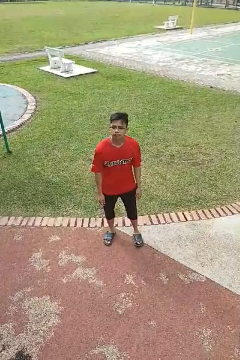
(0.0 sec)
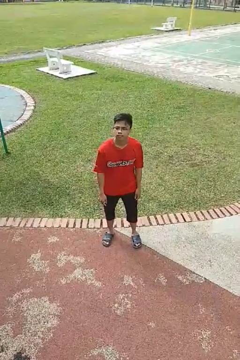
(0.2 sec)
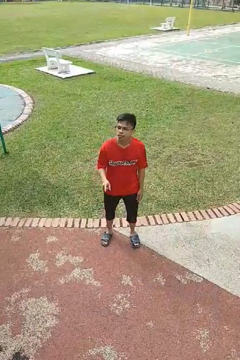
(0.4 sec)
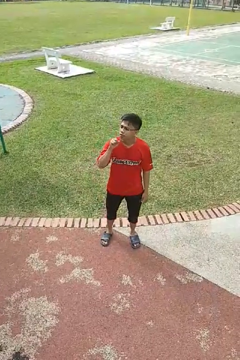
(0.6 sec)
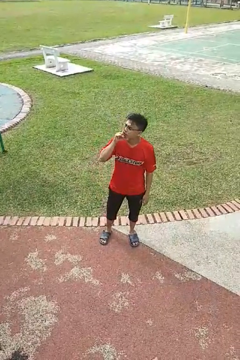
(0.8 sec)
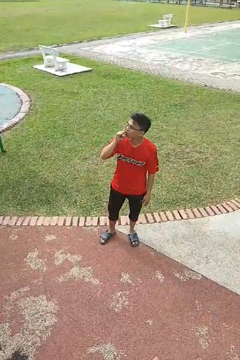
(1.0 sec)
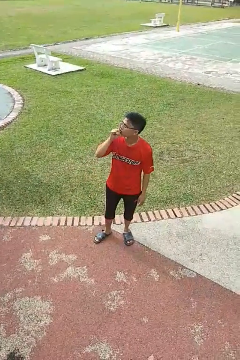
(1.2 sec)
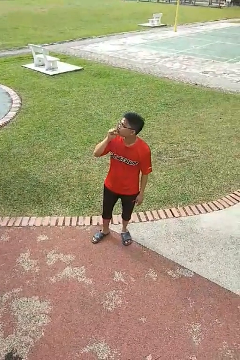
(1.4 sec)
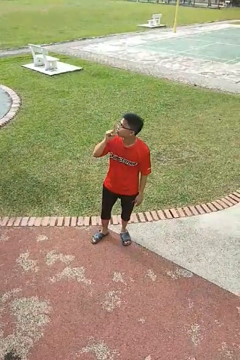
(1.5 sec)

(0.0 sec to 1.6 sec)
person gestures be quiet

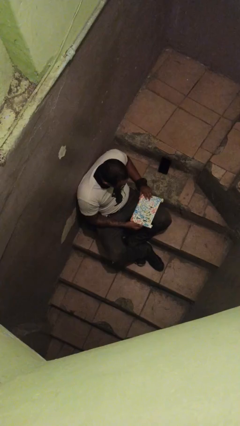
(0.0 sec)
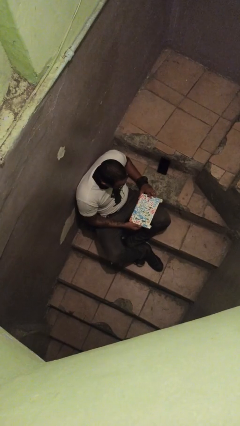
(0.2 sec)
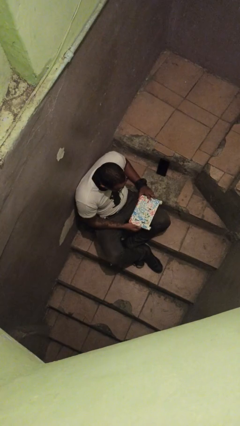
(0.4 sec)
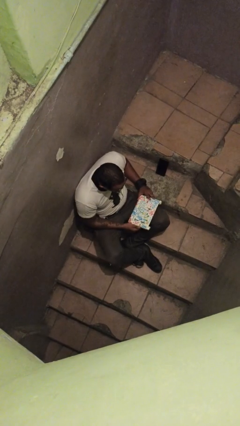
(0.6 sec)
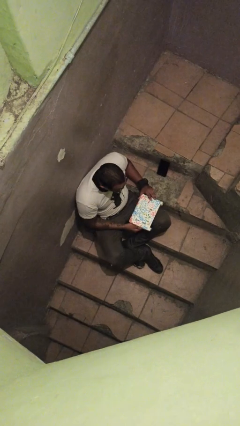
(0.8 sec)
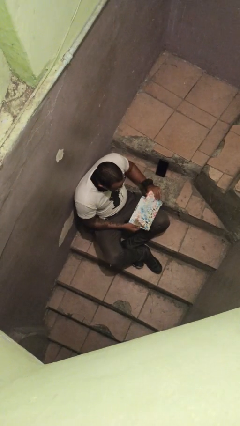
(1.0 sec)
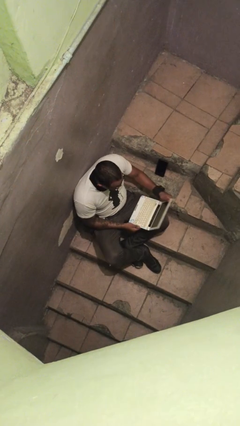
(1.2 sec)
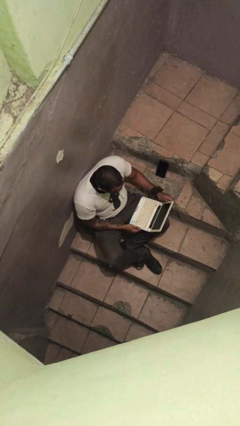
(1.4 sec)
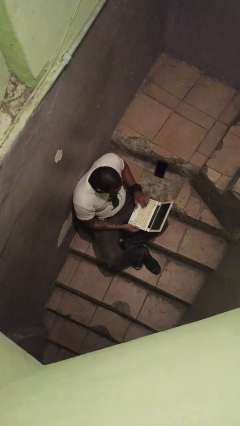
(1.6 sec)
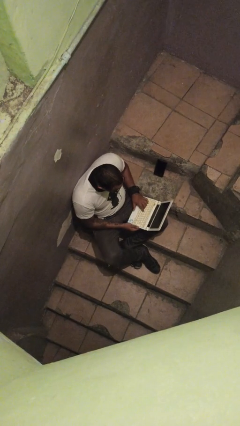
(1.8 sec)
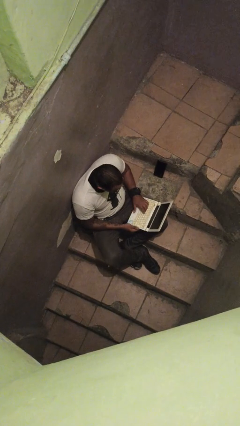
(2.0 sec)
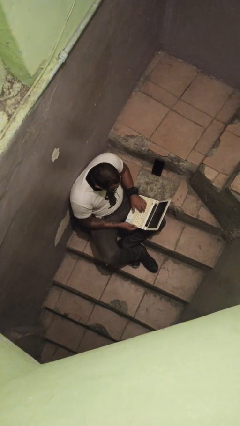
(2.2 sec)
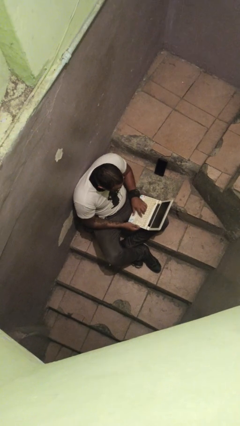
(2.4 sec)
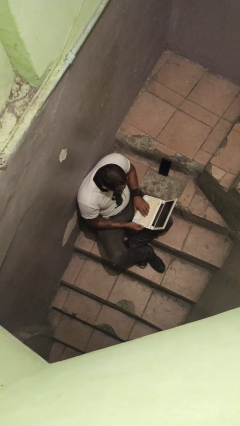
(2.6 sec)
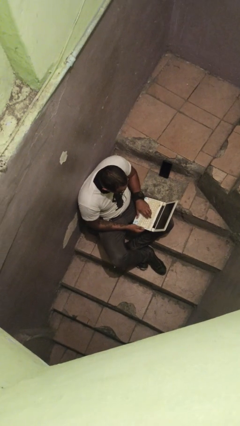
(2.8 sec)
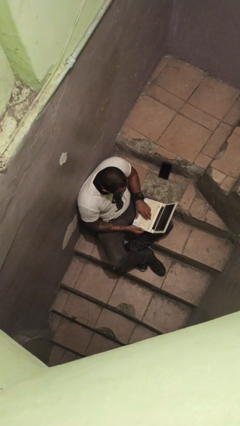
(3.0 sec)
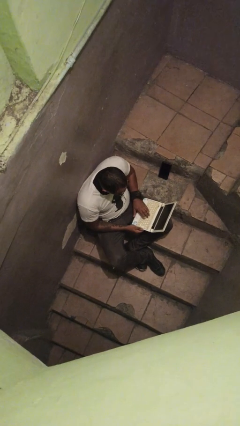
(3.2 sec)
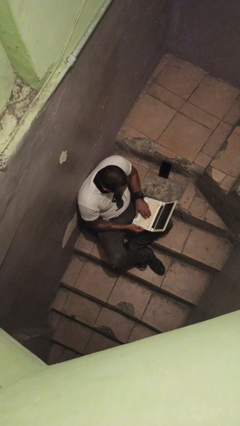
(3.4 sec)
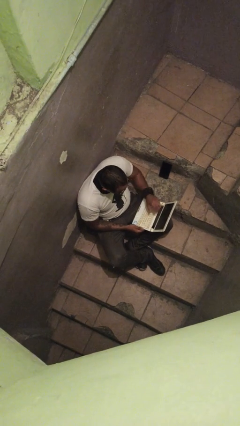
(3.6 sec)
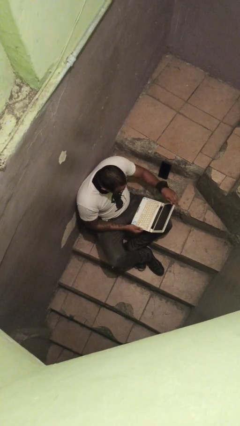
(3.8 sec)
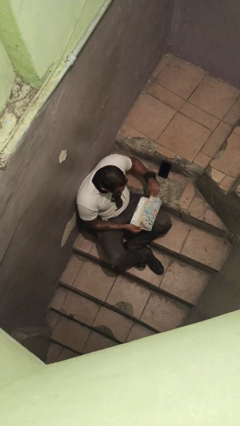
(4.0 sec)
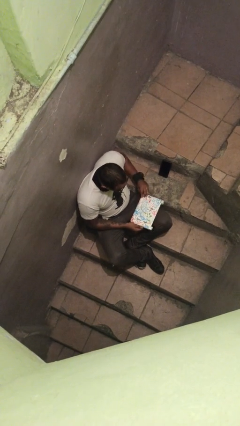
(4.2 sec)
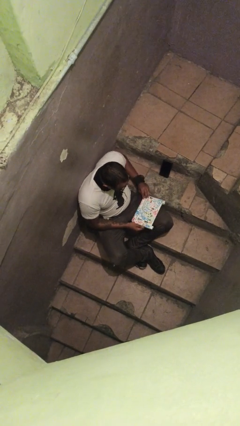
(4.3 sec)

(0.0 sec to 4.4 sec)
person interacts with laptop

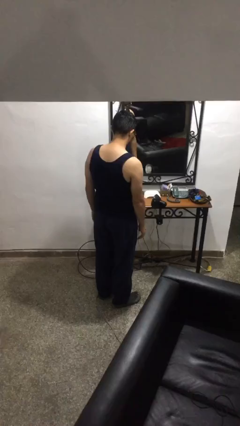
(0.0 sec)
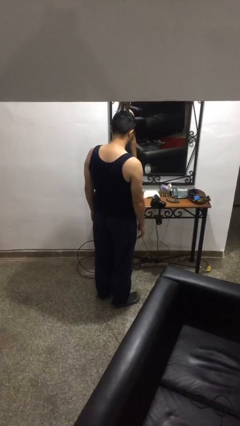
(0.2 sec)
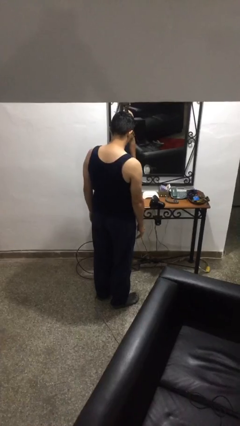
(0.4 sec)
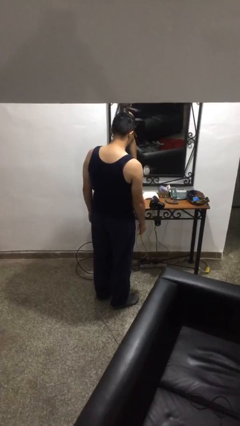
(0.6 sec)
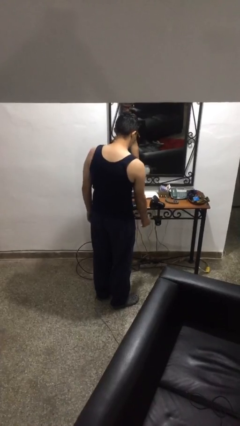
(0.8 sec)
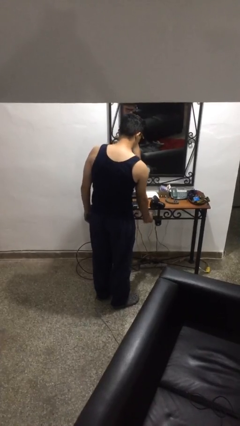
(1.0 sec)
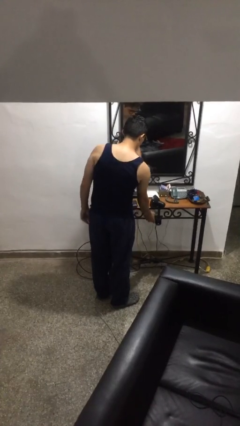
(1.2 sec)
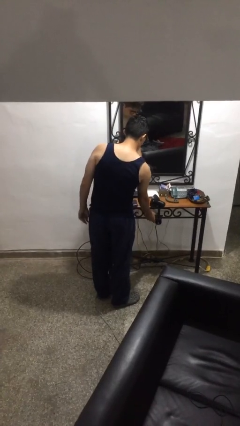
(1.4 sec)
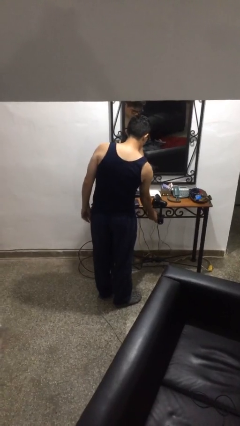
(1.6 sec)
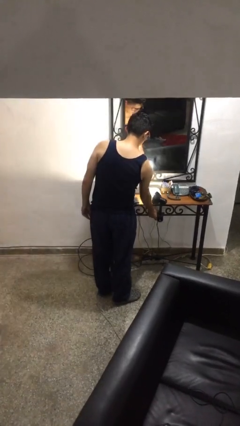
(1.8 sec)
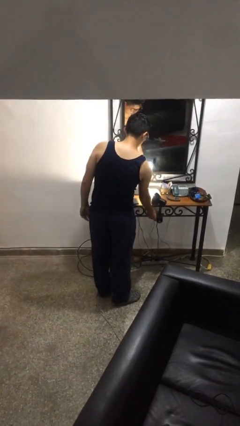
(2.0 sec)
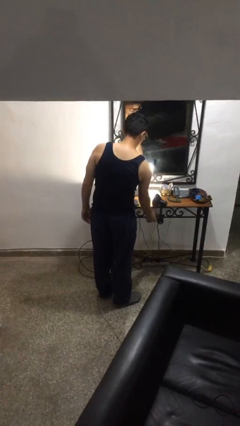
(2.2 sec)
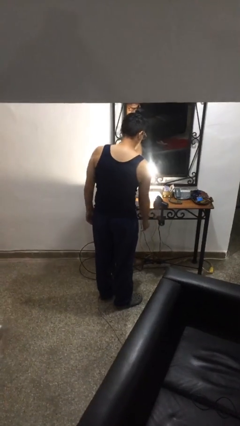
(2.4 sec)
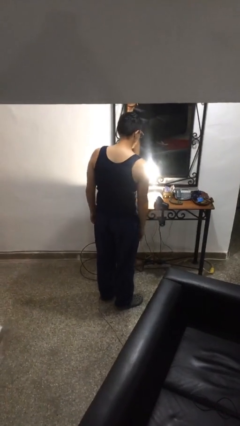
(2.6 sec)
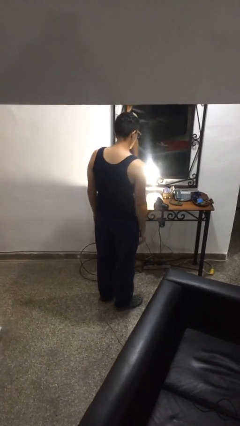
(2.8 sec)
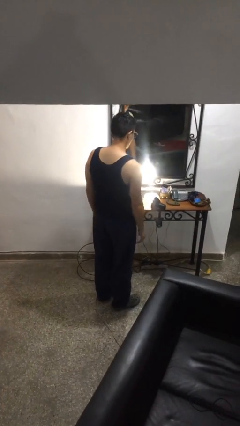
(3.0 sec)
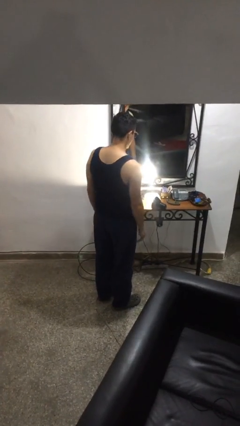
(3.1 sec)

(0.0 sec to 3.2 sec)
person turns on lamp

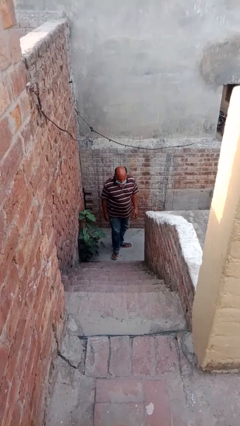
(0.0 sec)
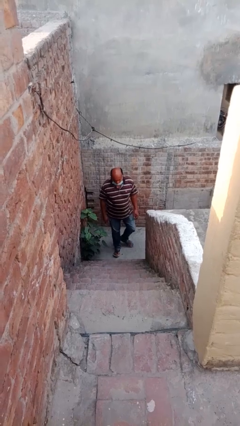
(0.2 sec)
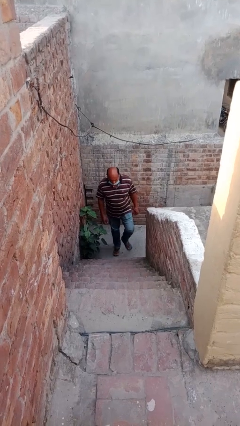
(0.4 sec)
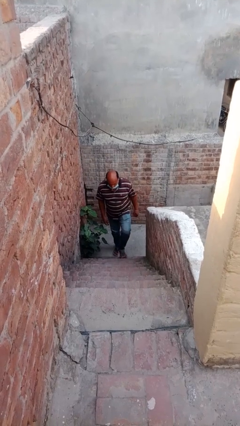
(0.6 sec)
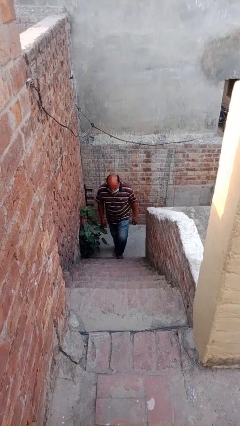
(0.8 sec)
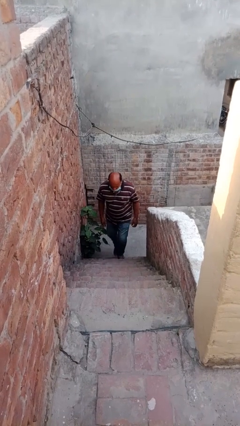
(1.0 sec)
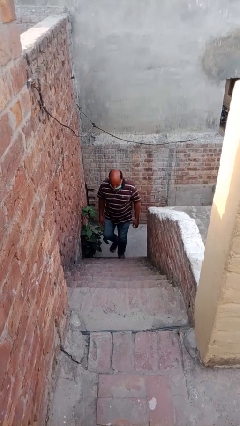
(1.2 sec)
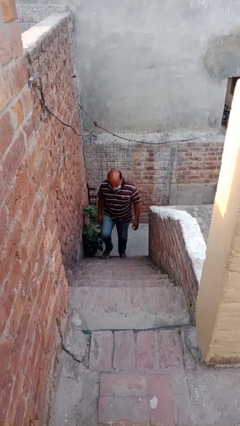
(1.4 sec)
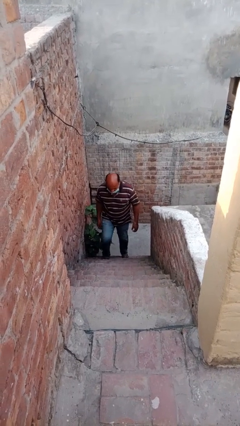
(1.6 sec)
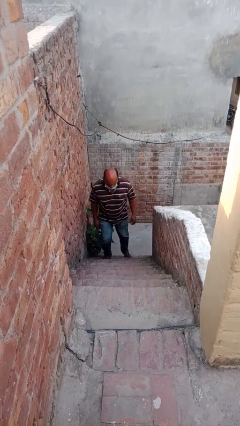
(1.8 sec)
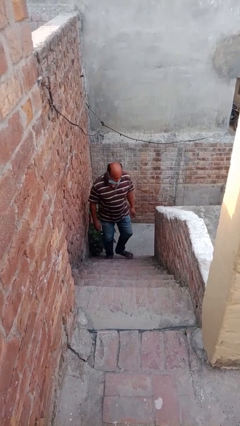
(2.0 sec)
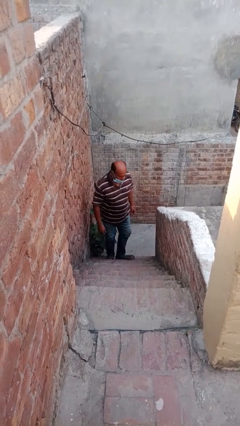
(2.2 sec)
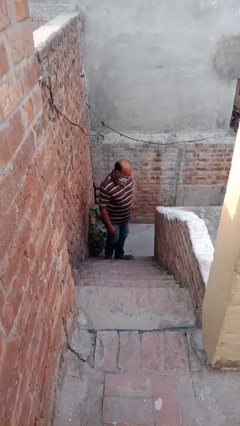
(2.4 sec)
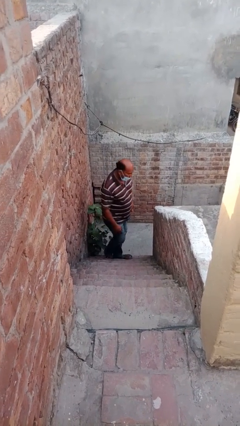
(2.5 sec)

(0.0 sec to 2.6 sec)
person climbs up stairs

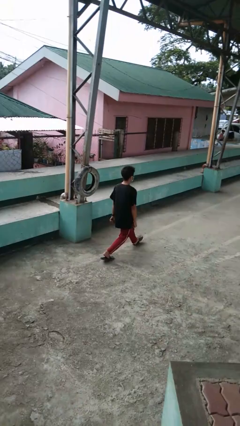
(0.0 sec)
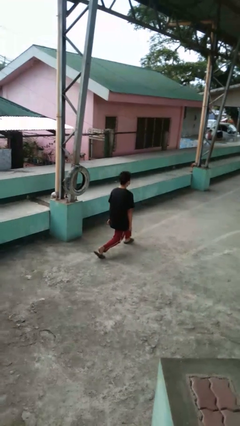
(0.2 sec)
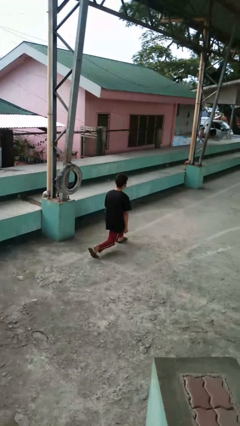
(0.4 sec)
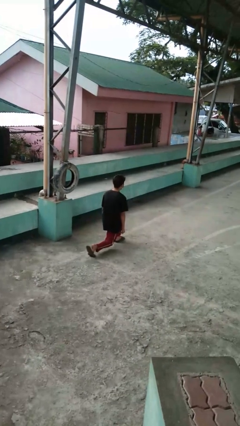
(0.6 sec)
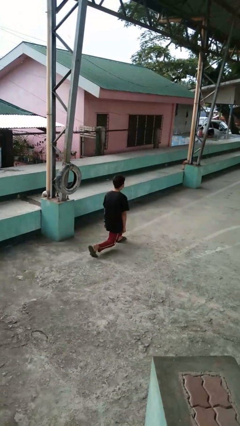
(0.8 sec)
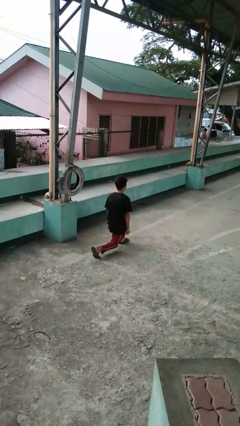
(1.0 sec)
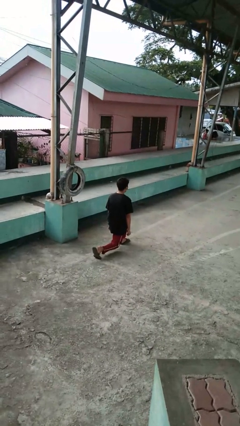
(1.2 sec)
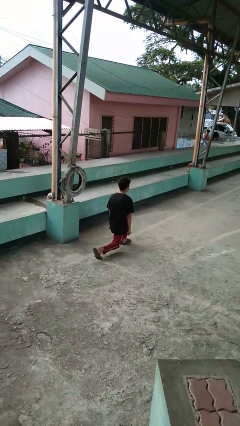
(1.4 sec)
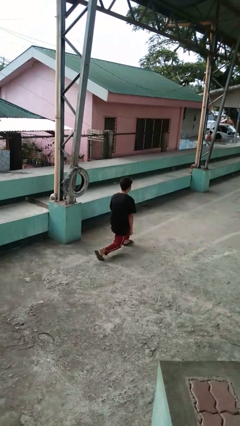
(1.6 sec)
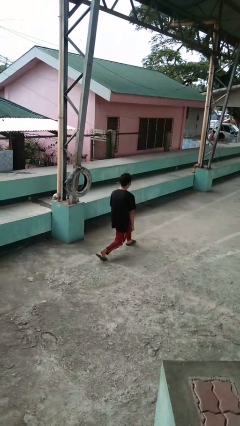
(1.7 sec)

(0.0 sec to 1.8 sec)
person exercises with lunges

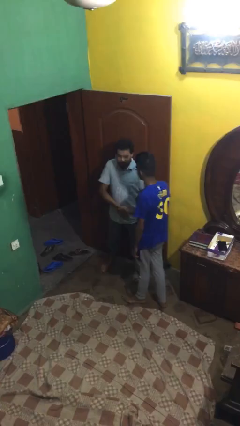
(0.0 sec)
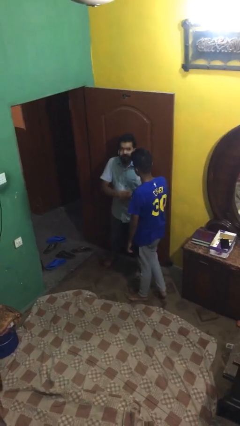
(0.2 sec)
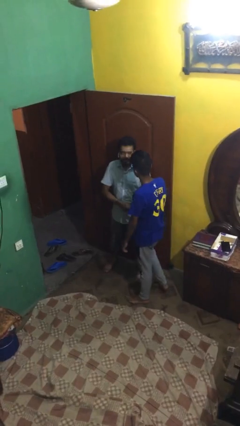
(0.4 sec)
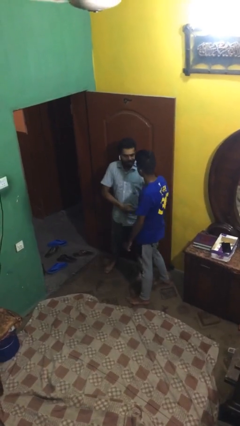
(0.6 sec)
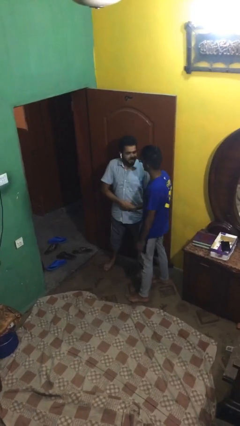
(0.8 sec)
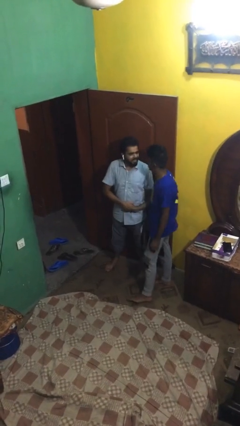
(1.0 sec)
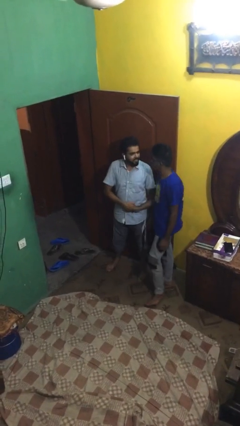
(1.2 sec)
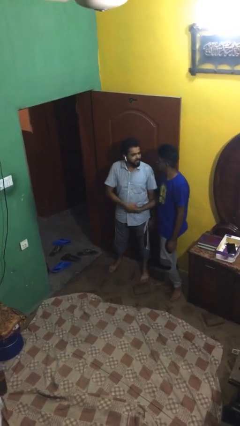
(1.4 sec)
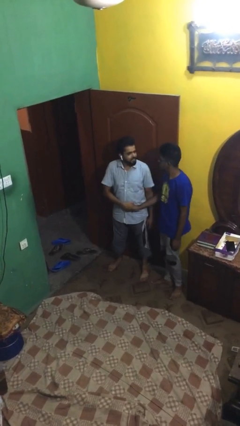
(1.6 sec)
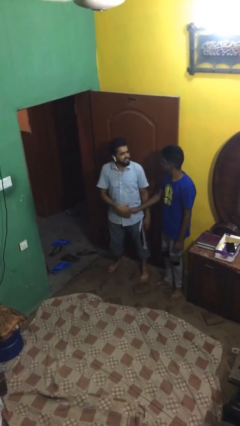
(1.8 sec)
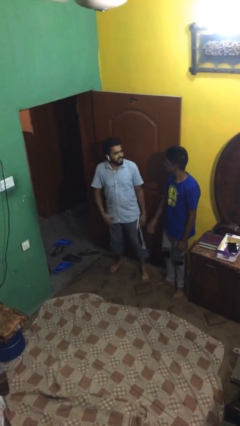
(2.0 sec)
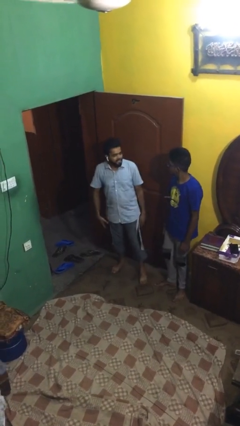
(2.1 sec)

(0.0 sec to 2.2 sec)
person shakes hand

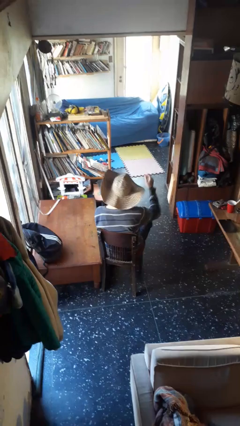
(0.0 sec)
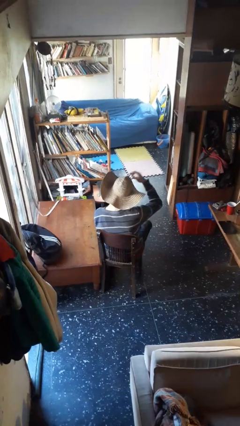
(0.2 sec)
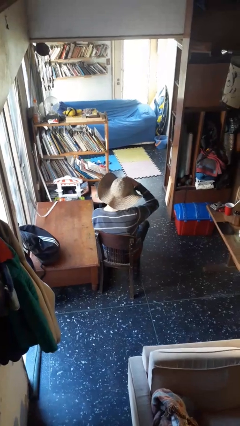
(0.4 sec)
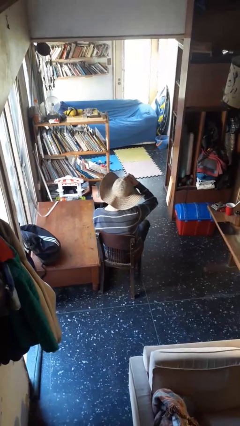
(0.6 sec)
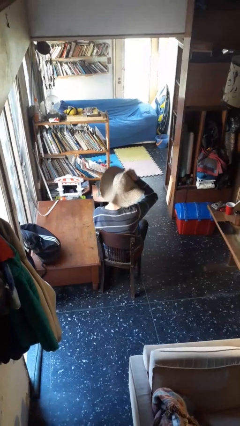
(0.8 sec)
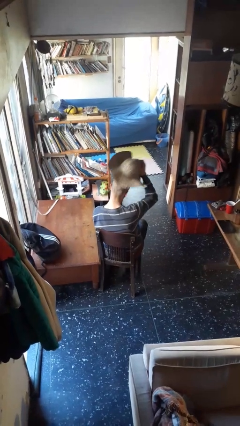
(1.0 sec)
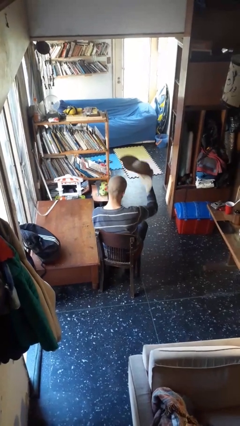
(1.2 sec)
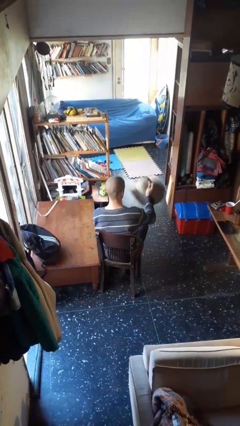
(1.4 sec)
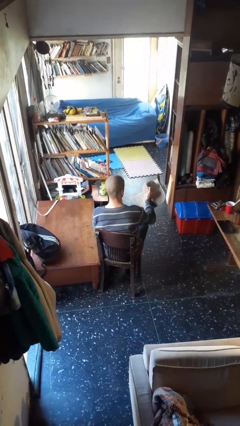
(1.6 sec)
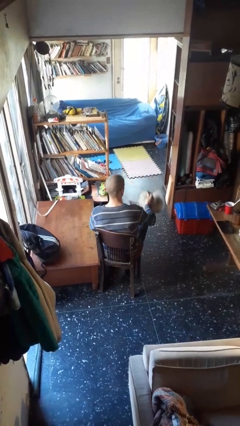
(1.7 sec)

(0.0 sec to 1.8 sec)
person takes off hat
